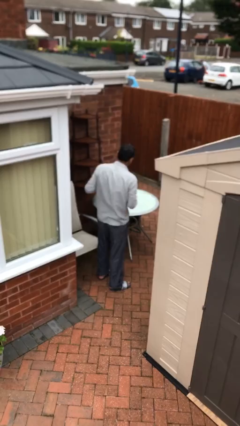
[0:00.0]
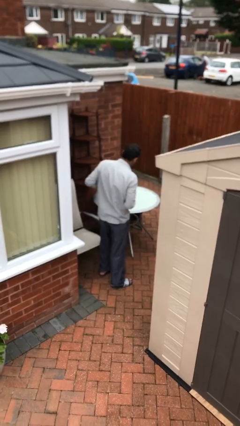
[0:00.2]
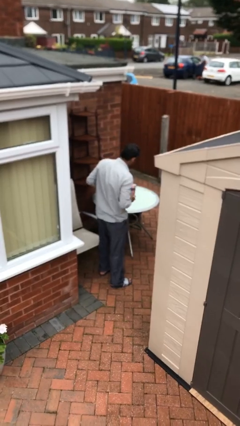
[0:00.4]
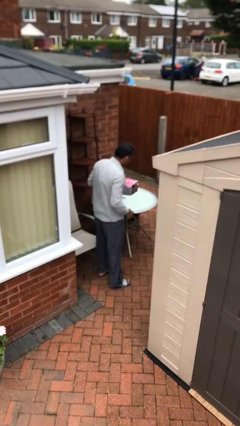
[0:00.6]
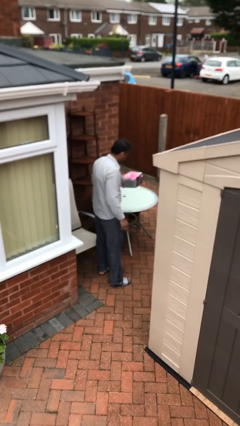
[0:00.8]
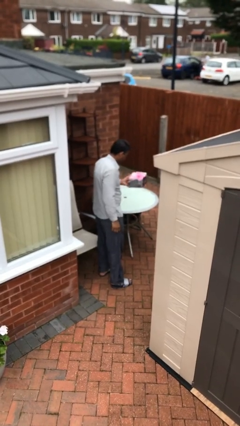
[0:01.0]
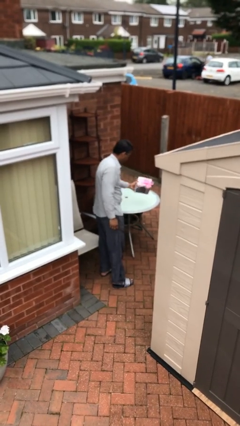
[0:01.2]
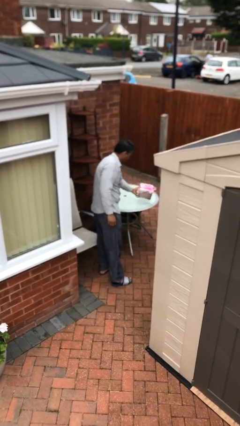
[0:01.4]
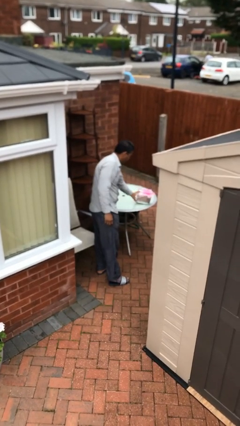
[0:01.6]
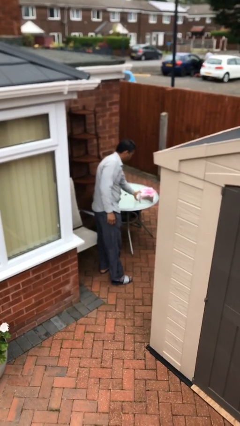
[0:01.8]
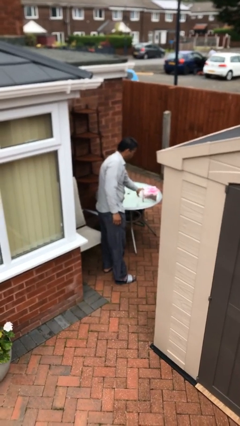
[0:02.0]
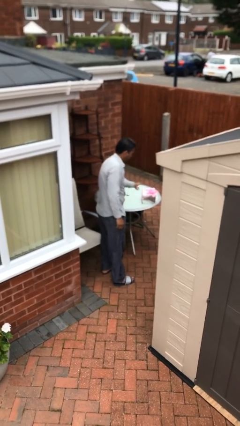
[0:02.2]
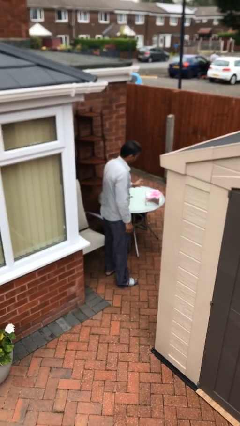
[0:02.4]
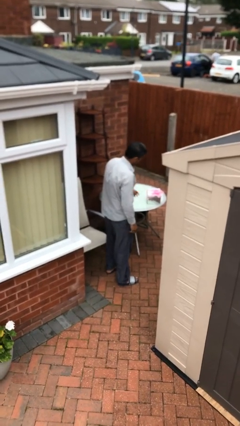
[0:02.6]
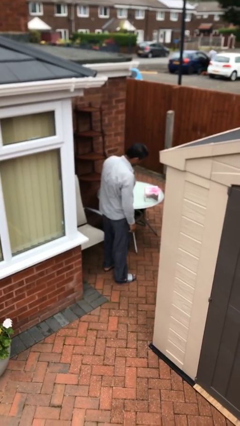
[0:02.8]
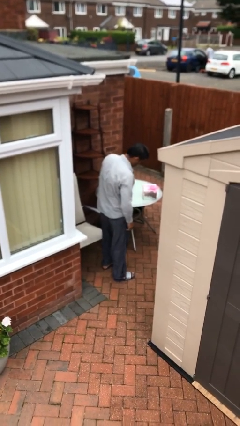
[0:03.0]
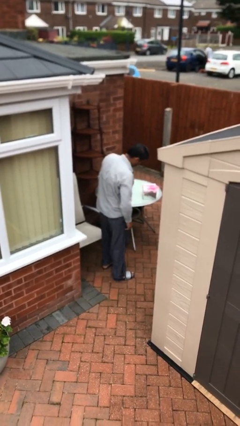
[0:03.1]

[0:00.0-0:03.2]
person puts down object on table

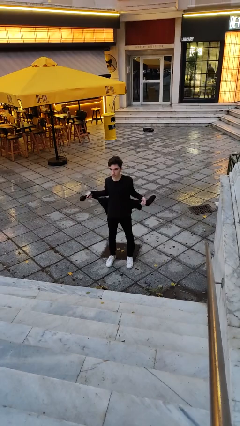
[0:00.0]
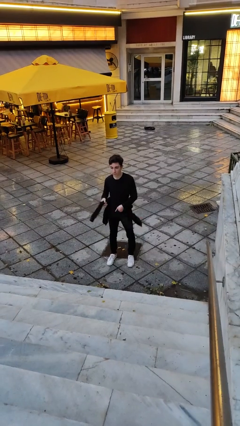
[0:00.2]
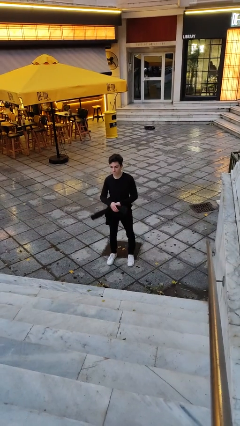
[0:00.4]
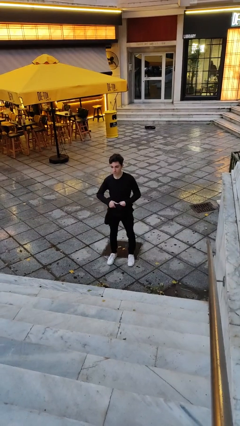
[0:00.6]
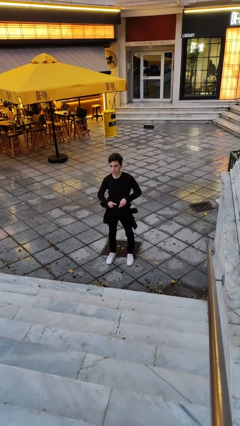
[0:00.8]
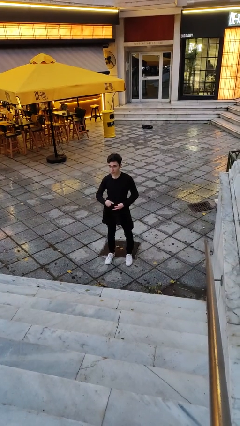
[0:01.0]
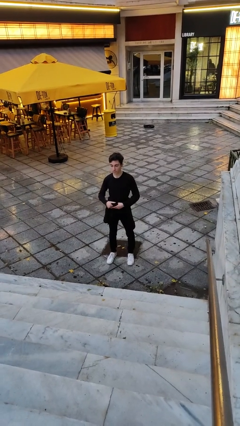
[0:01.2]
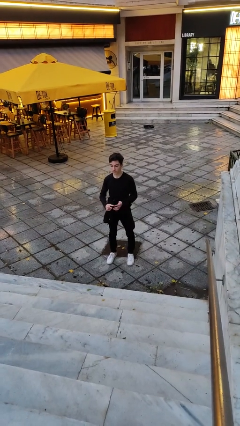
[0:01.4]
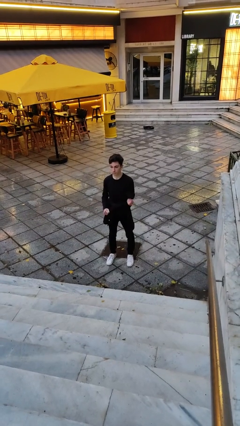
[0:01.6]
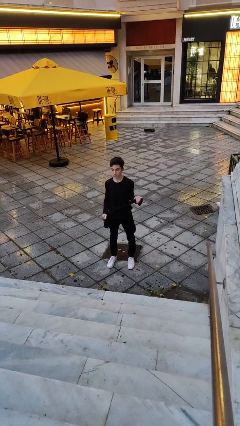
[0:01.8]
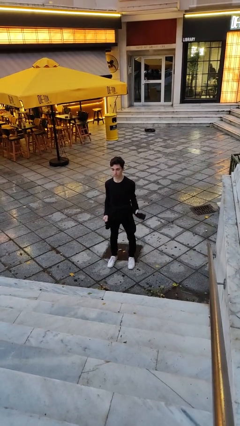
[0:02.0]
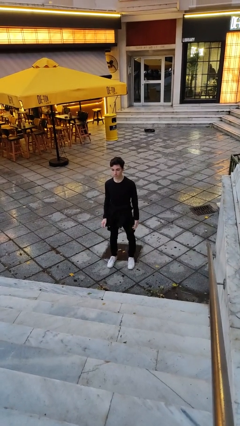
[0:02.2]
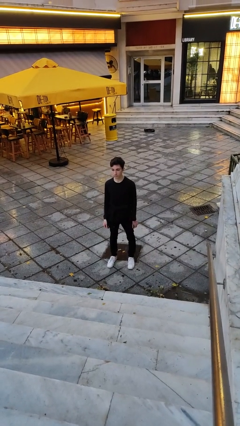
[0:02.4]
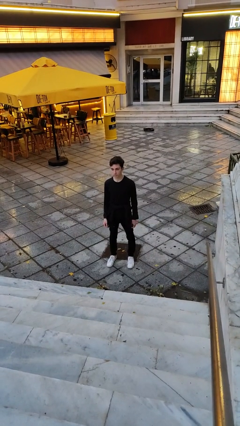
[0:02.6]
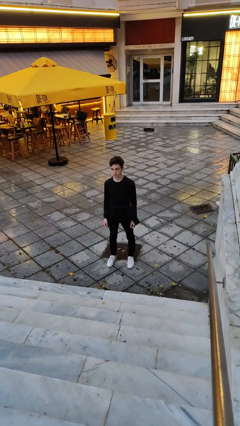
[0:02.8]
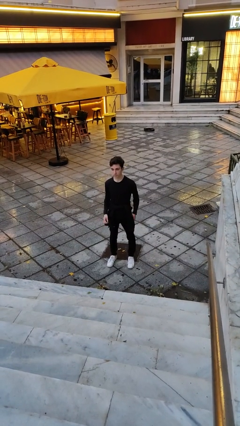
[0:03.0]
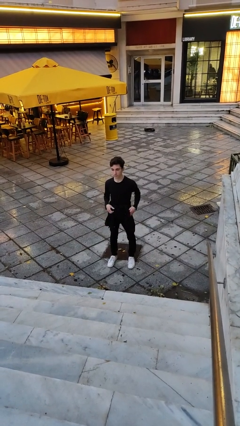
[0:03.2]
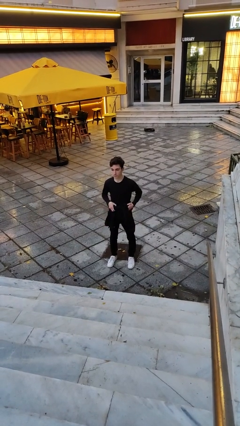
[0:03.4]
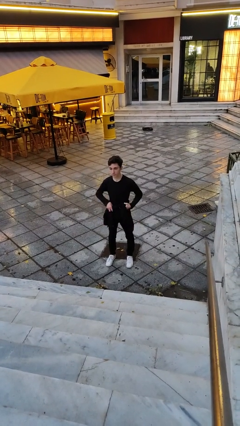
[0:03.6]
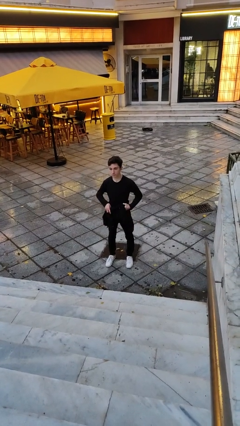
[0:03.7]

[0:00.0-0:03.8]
person ties jacket around waist

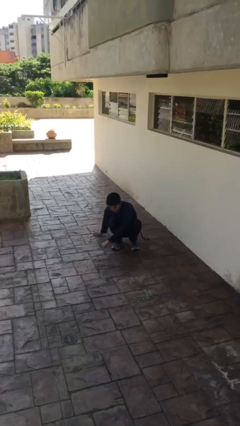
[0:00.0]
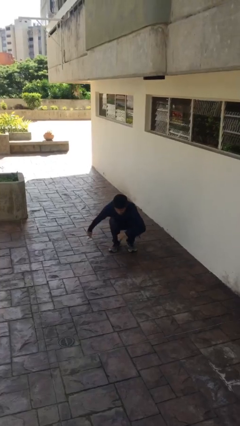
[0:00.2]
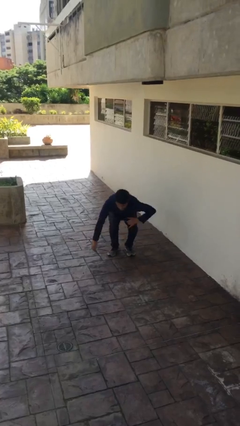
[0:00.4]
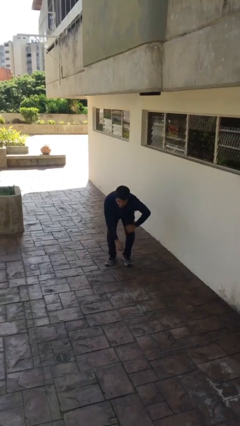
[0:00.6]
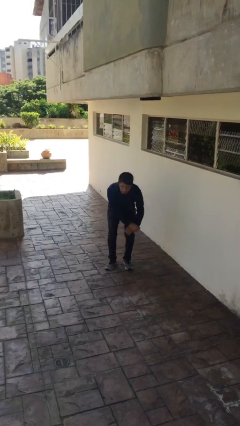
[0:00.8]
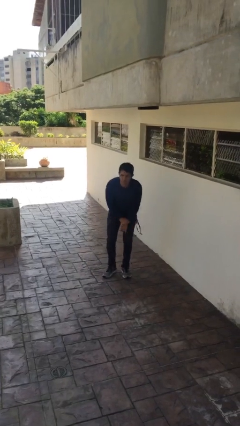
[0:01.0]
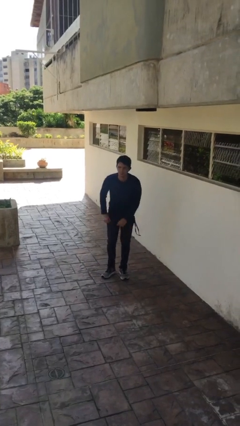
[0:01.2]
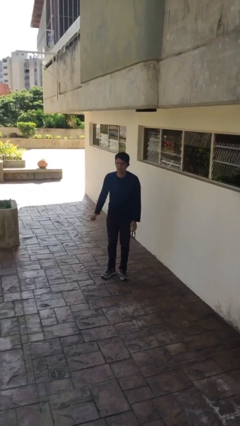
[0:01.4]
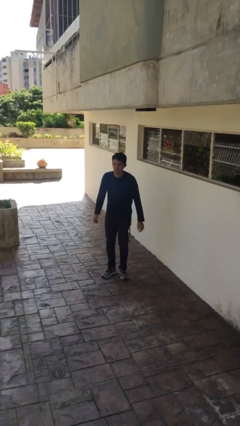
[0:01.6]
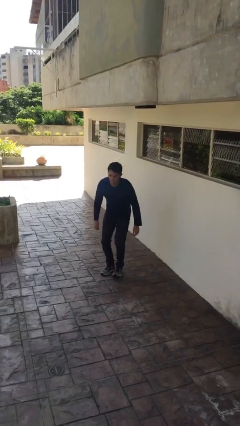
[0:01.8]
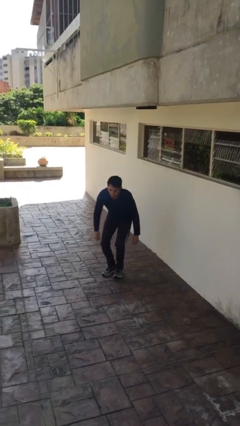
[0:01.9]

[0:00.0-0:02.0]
person stands up

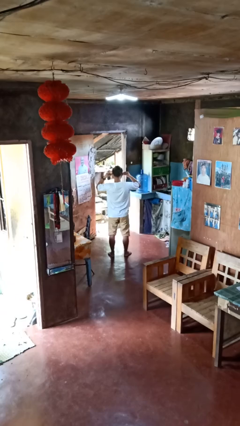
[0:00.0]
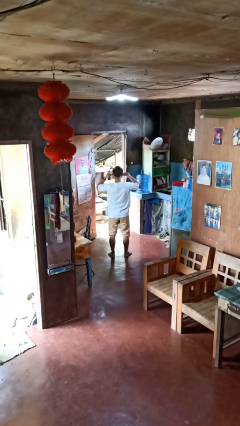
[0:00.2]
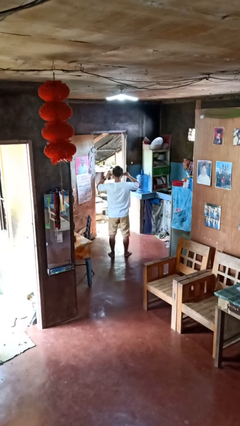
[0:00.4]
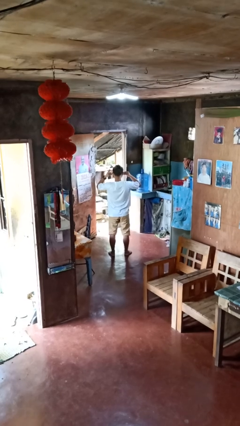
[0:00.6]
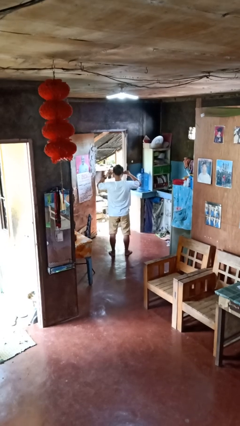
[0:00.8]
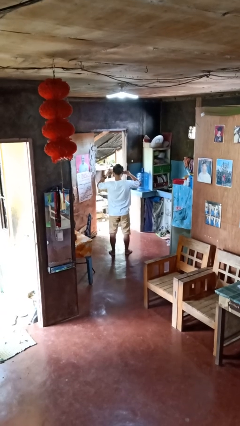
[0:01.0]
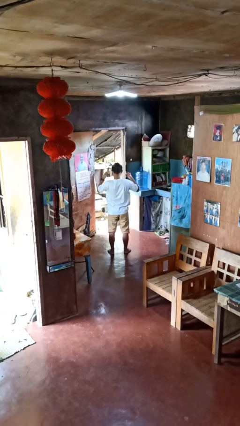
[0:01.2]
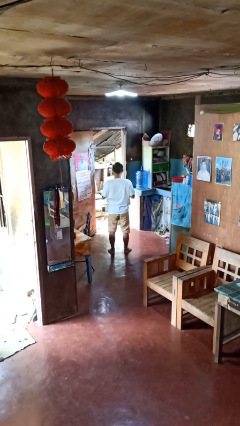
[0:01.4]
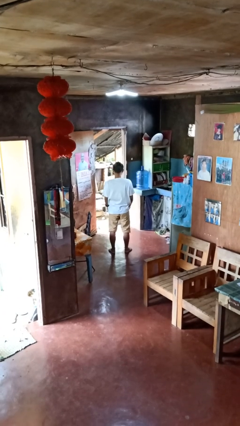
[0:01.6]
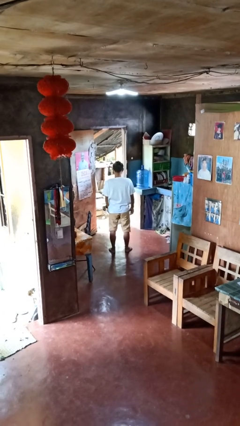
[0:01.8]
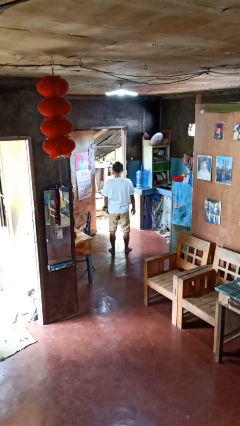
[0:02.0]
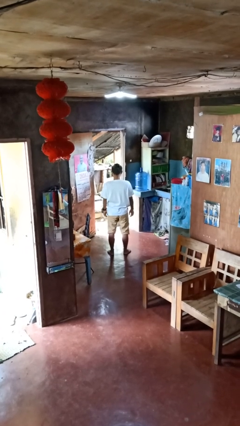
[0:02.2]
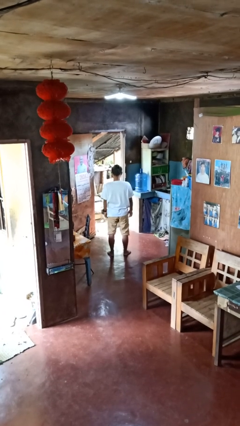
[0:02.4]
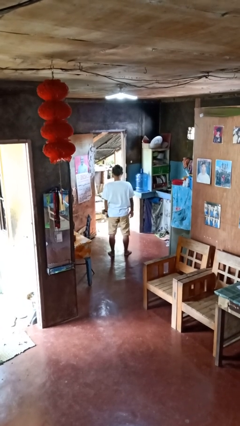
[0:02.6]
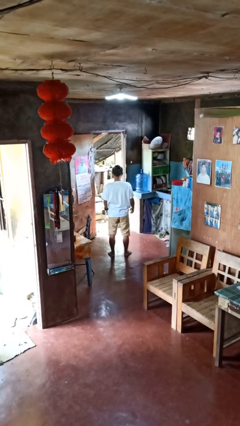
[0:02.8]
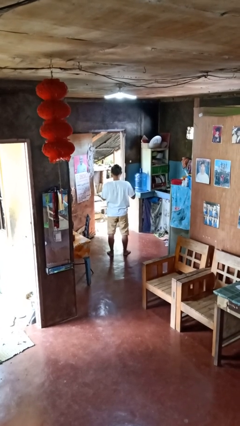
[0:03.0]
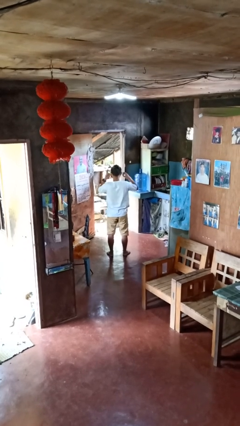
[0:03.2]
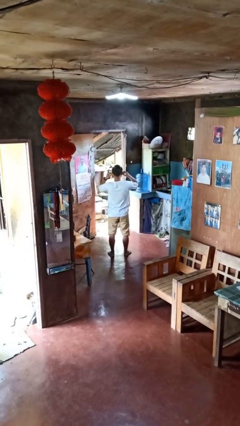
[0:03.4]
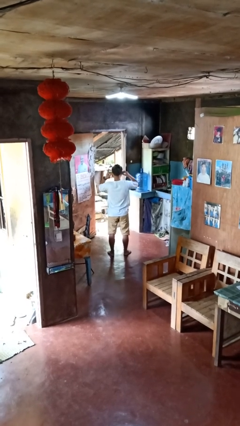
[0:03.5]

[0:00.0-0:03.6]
person puts on headphones

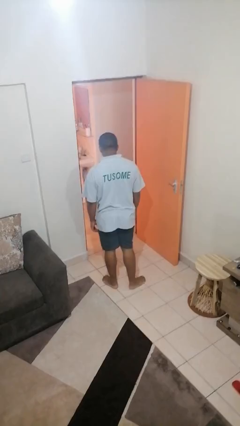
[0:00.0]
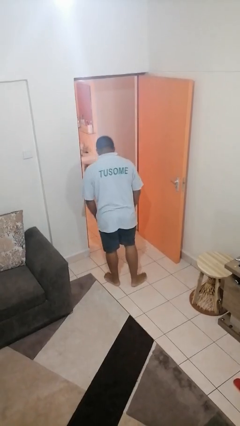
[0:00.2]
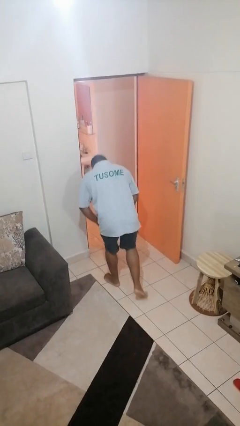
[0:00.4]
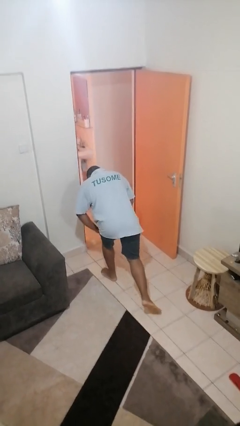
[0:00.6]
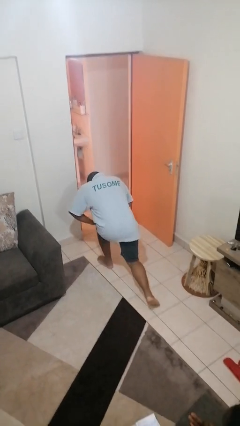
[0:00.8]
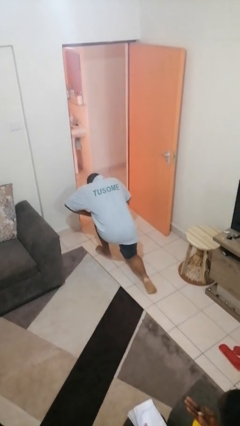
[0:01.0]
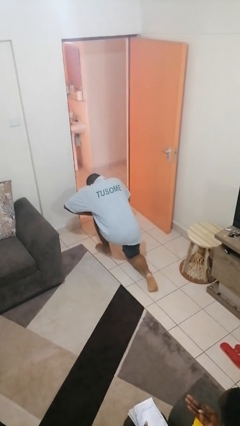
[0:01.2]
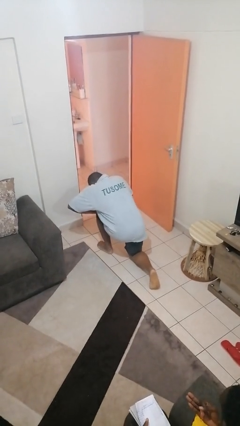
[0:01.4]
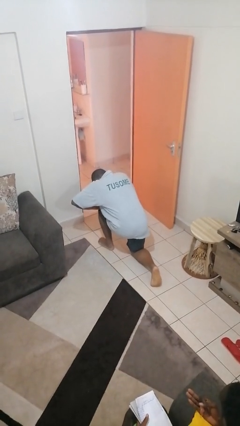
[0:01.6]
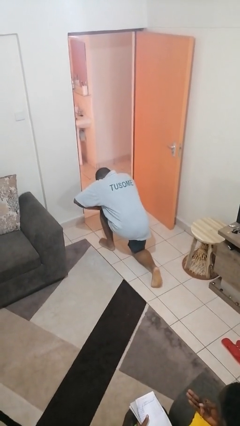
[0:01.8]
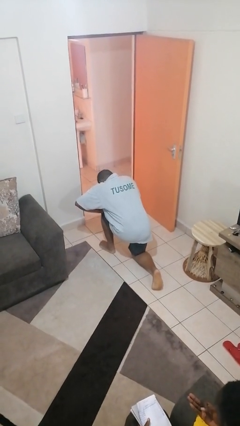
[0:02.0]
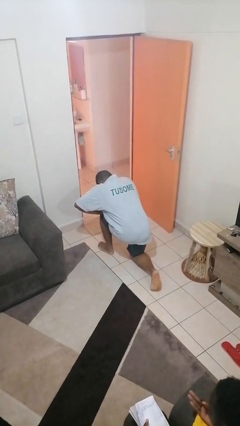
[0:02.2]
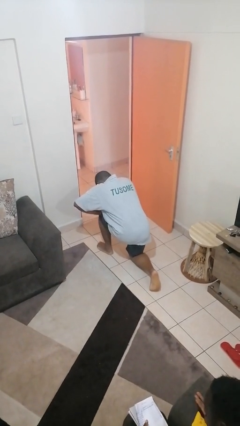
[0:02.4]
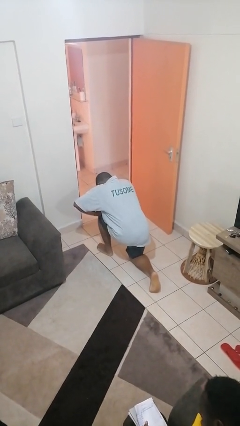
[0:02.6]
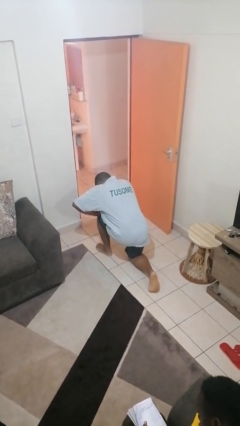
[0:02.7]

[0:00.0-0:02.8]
person kneels

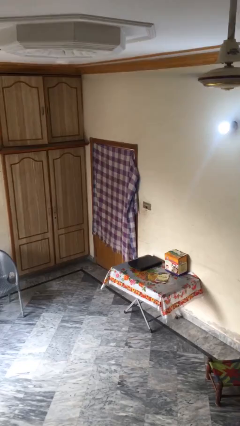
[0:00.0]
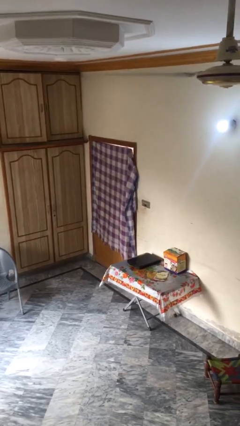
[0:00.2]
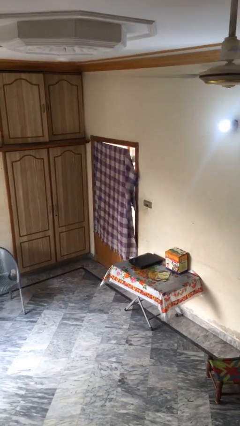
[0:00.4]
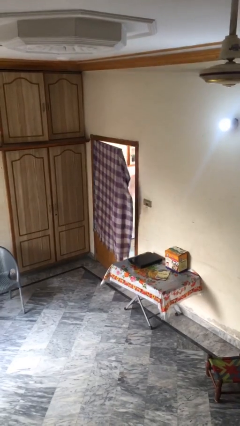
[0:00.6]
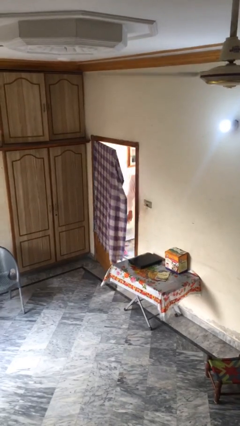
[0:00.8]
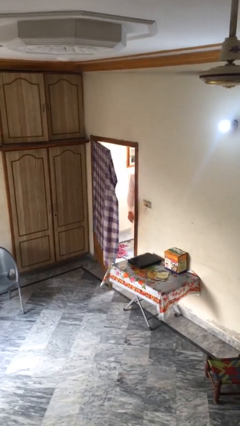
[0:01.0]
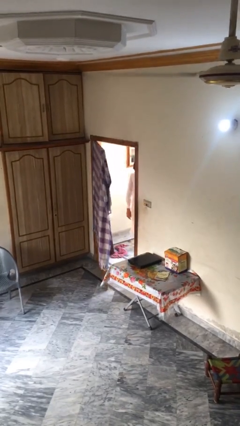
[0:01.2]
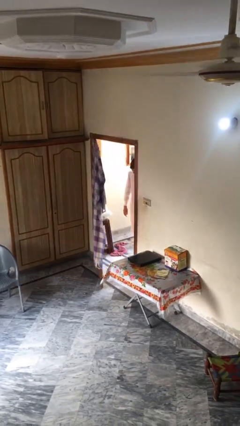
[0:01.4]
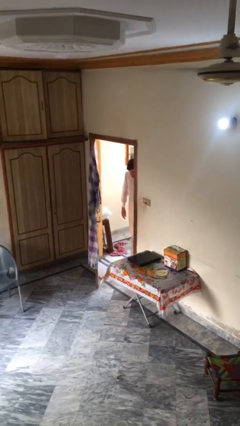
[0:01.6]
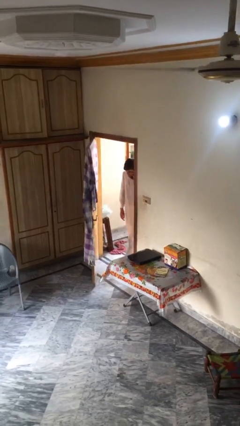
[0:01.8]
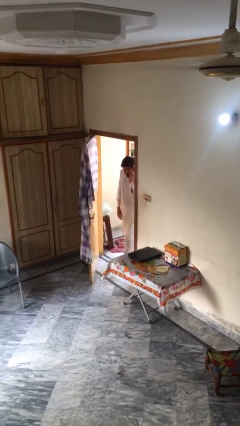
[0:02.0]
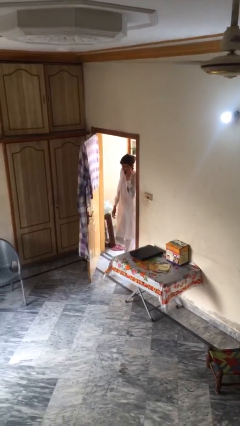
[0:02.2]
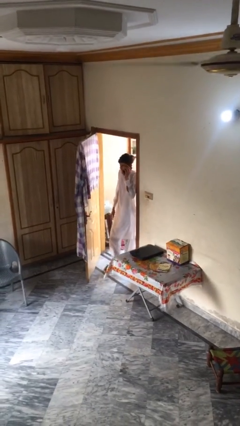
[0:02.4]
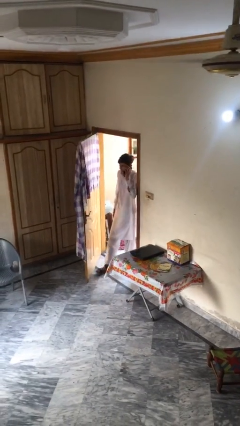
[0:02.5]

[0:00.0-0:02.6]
person opens facility door
